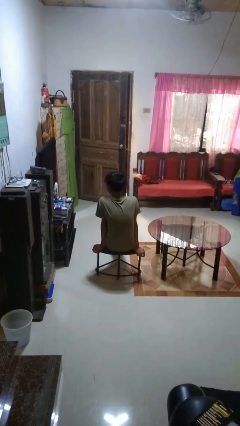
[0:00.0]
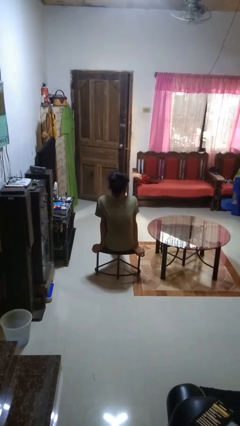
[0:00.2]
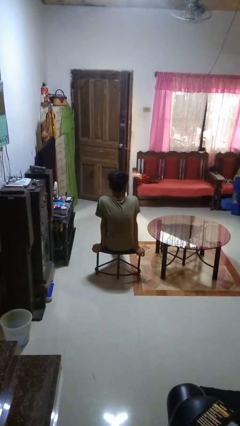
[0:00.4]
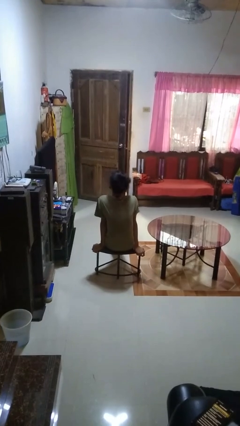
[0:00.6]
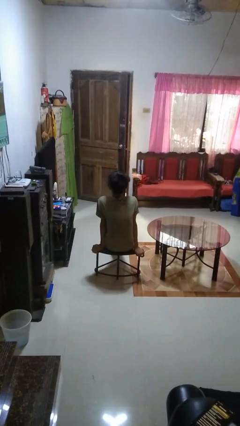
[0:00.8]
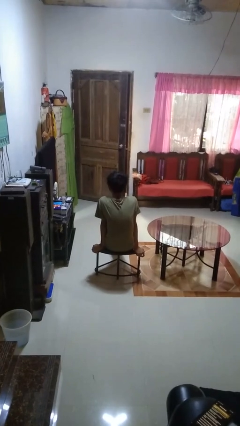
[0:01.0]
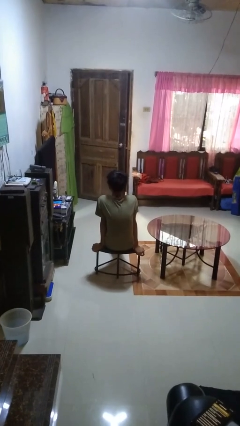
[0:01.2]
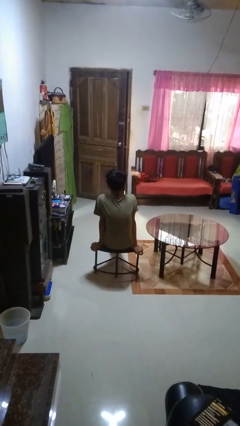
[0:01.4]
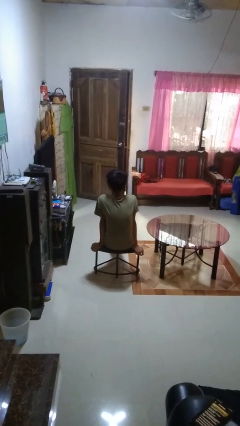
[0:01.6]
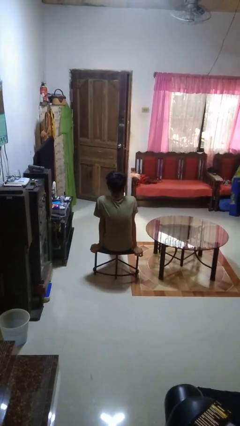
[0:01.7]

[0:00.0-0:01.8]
person nods head

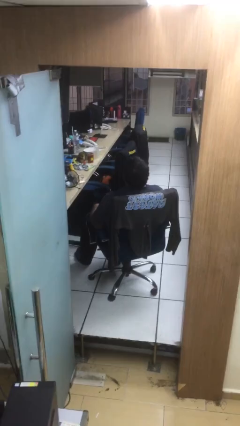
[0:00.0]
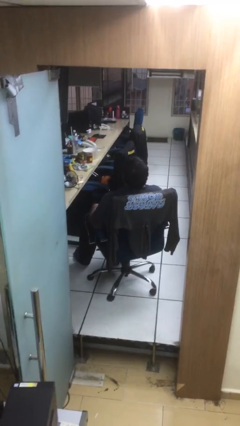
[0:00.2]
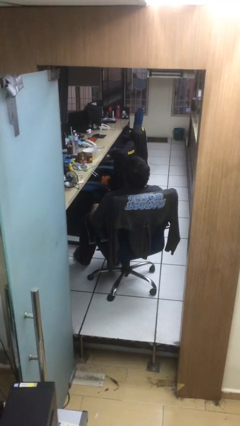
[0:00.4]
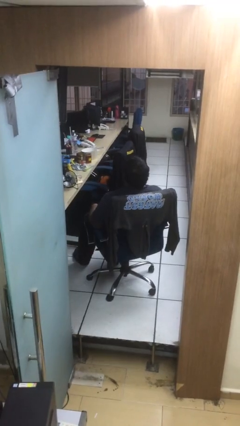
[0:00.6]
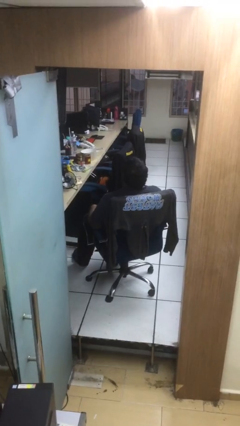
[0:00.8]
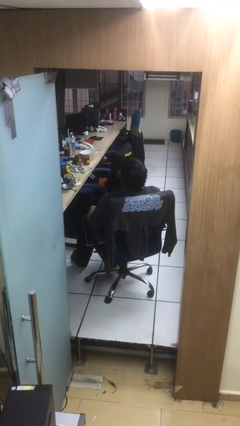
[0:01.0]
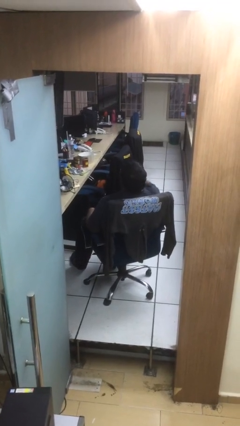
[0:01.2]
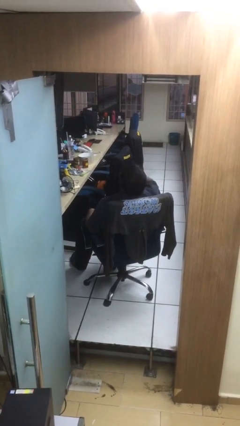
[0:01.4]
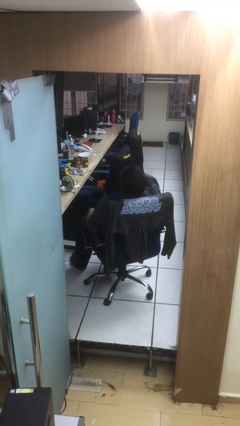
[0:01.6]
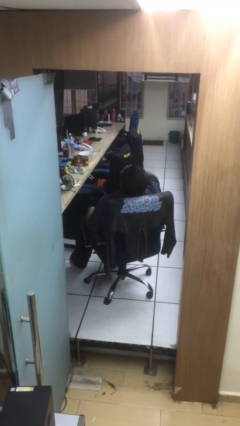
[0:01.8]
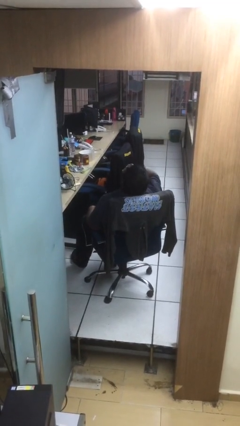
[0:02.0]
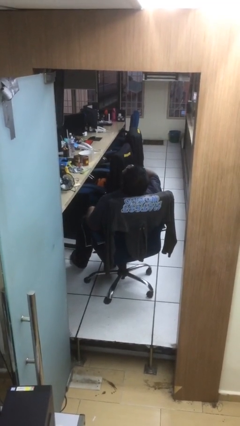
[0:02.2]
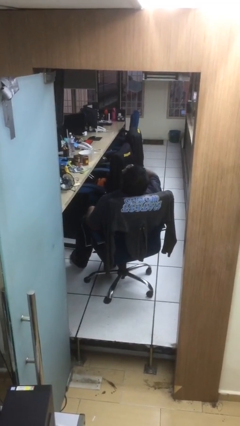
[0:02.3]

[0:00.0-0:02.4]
person yawns

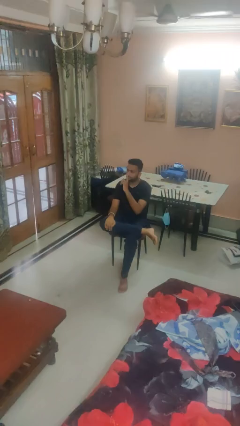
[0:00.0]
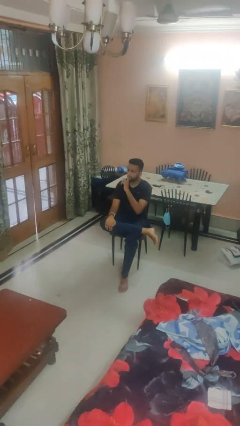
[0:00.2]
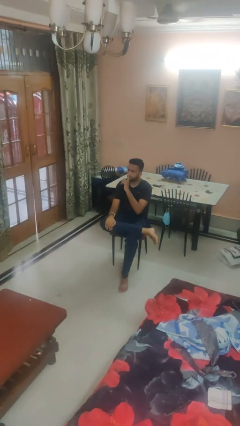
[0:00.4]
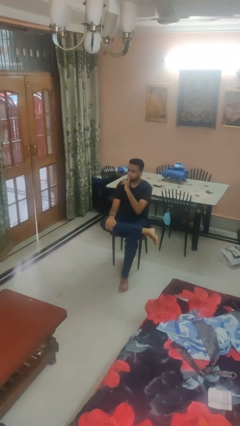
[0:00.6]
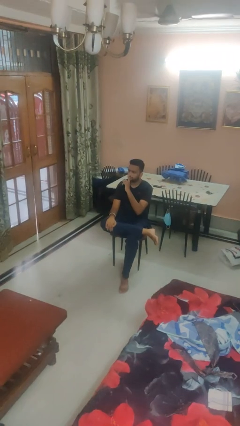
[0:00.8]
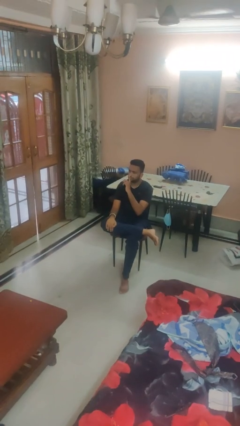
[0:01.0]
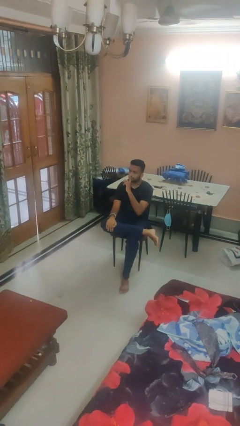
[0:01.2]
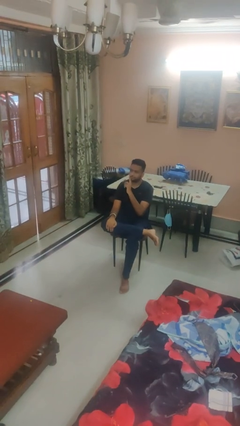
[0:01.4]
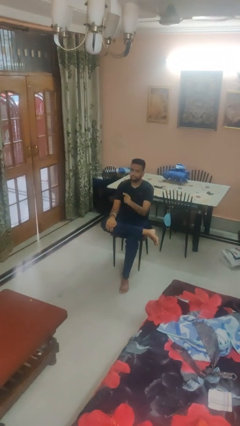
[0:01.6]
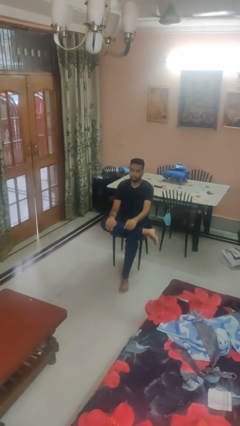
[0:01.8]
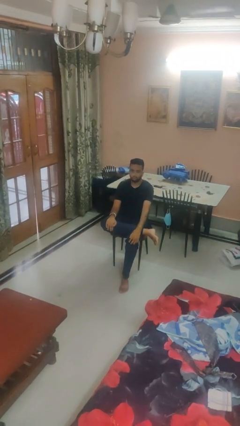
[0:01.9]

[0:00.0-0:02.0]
person gestures be quiet

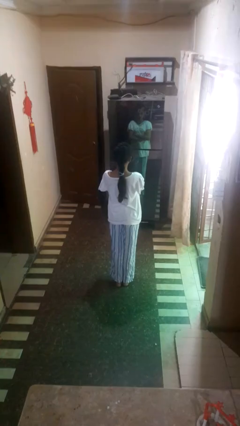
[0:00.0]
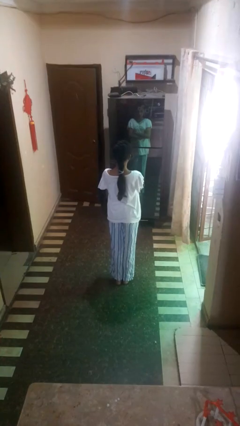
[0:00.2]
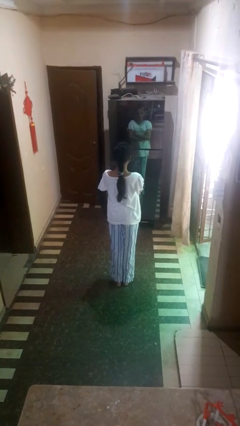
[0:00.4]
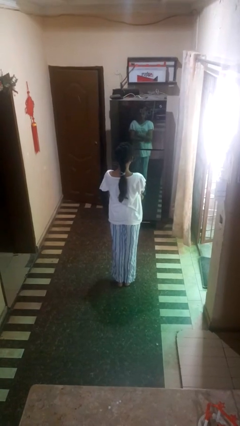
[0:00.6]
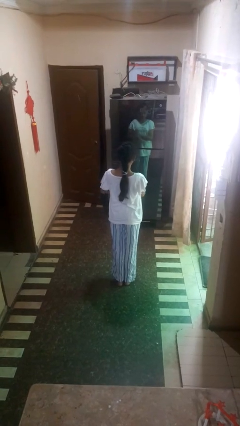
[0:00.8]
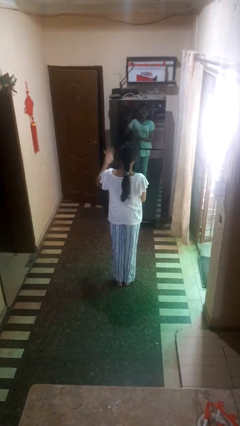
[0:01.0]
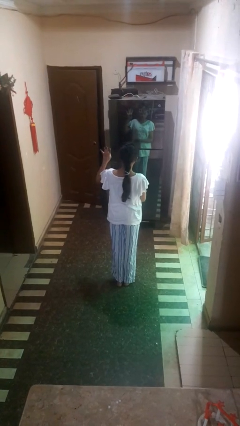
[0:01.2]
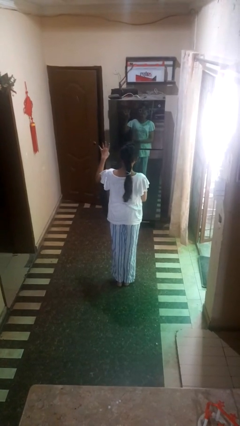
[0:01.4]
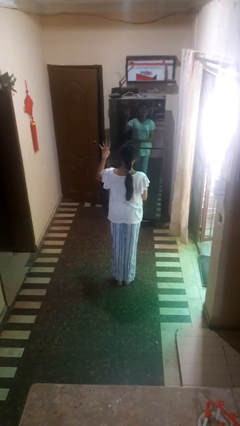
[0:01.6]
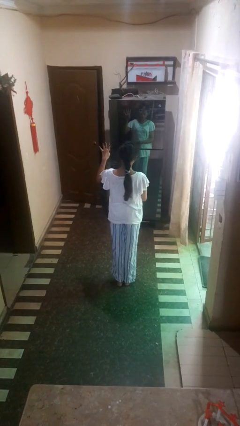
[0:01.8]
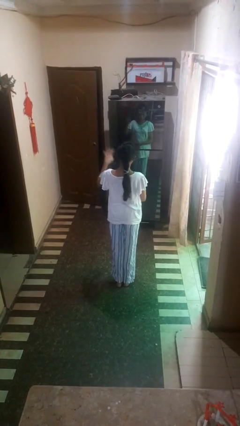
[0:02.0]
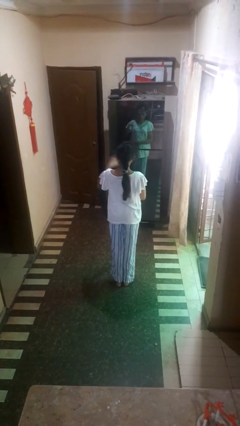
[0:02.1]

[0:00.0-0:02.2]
person gestures number four

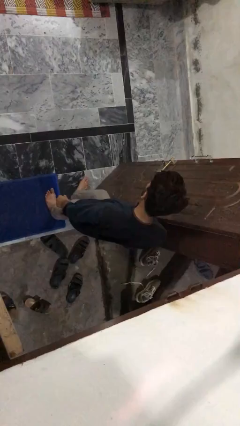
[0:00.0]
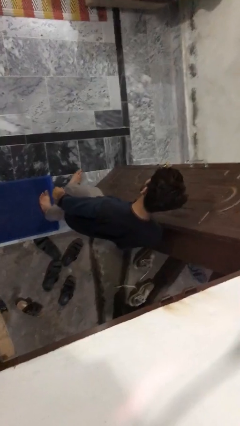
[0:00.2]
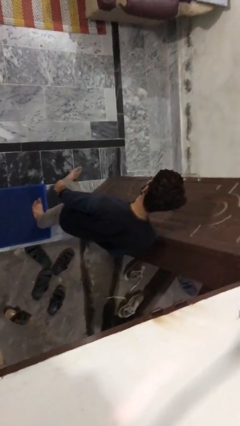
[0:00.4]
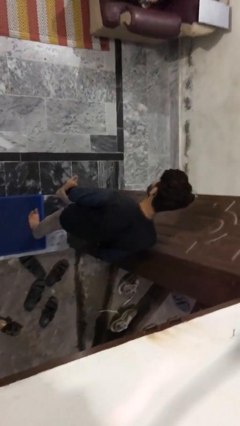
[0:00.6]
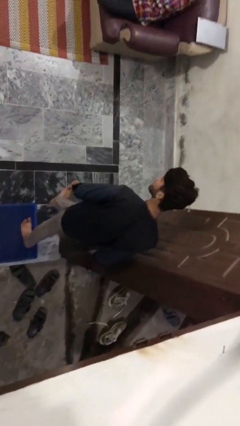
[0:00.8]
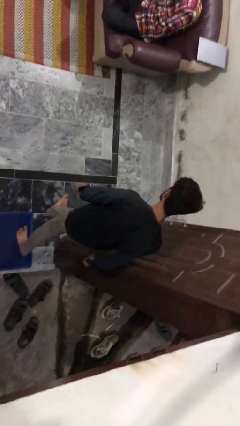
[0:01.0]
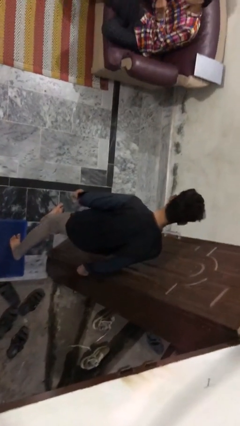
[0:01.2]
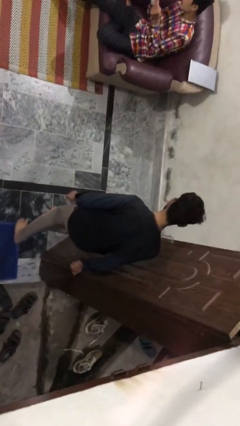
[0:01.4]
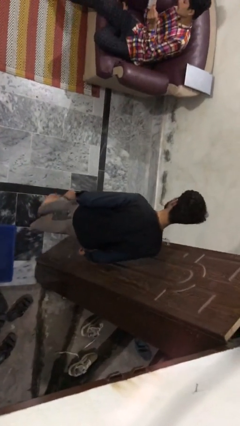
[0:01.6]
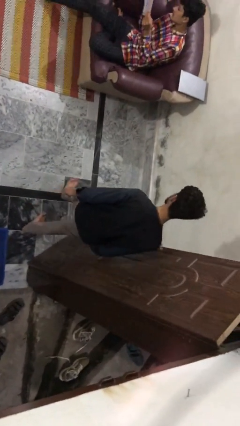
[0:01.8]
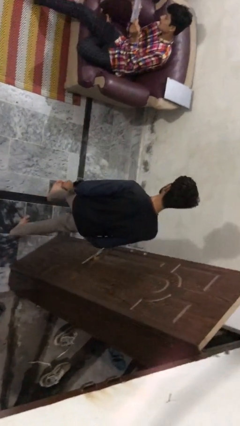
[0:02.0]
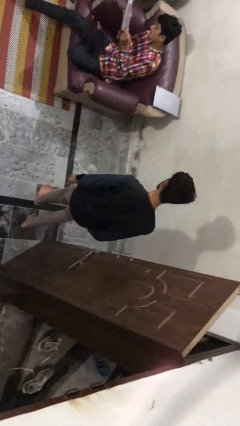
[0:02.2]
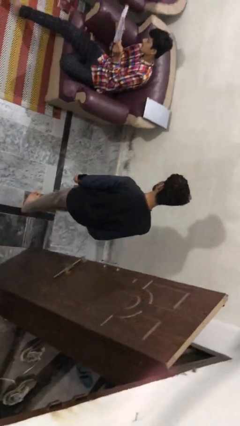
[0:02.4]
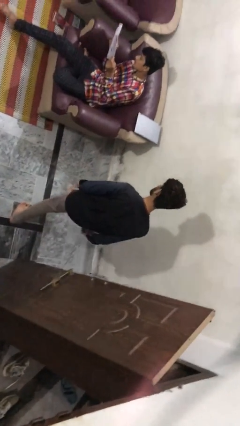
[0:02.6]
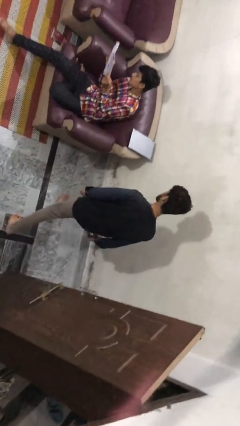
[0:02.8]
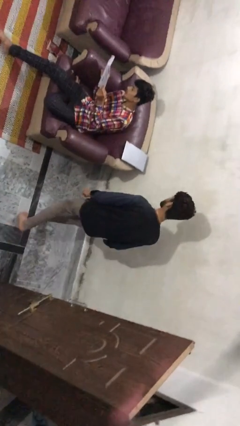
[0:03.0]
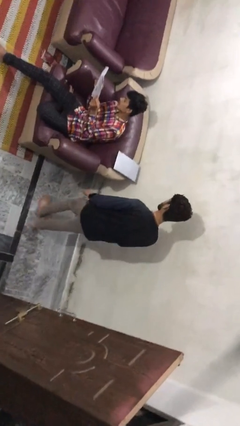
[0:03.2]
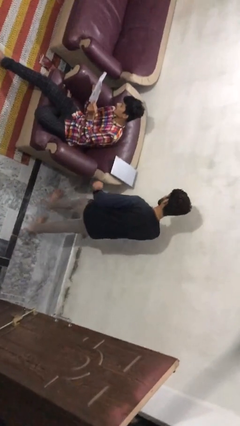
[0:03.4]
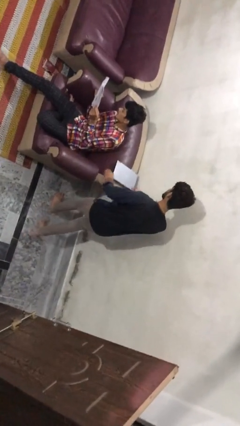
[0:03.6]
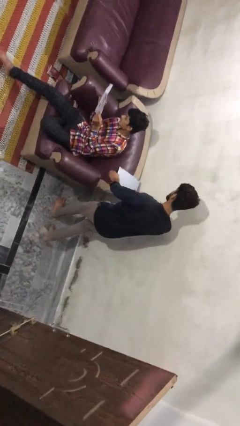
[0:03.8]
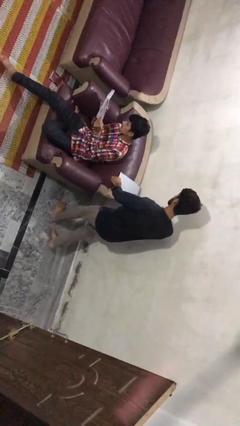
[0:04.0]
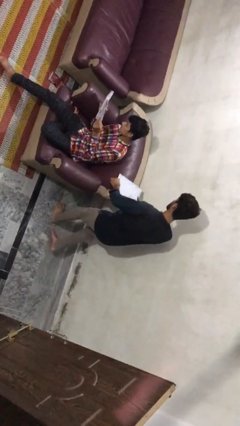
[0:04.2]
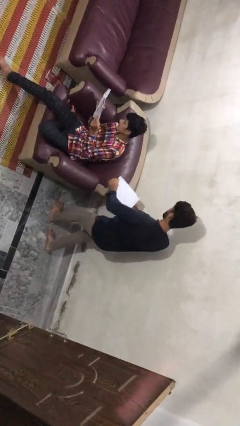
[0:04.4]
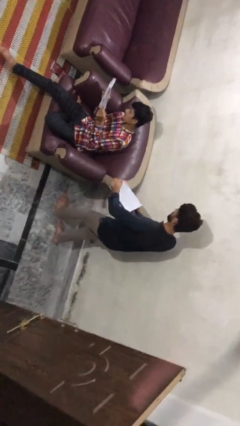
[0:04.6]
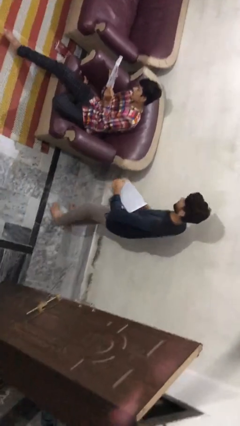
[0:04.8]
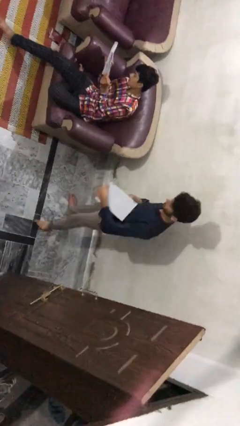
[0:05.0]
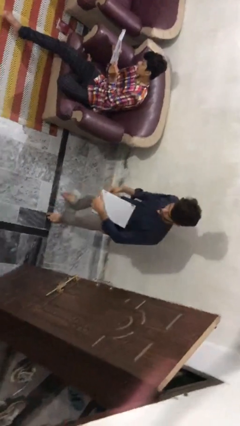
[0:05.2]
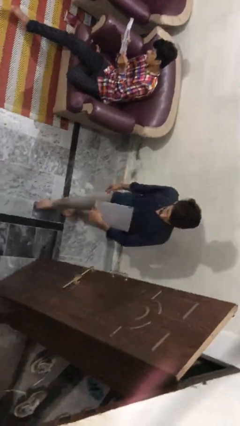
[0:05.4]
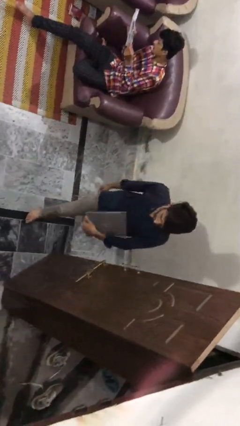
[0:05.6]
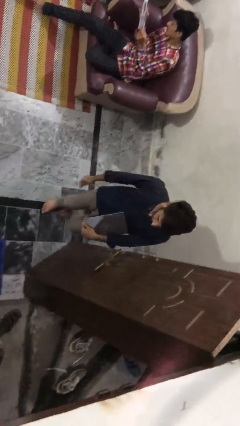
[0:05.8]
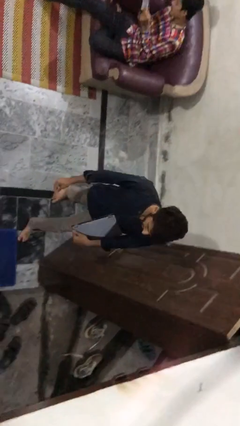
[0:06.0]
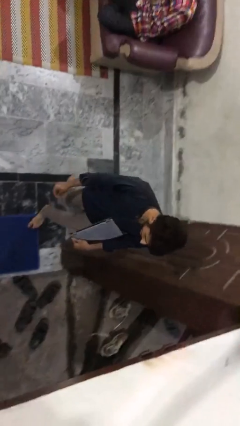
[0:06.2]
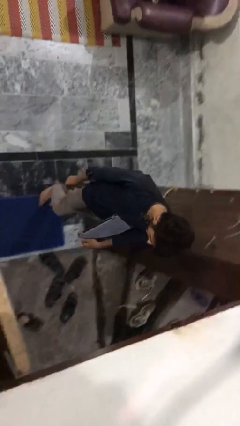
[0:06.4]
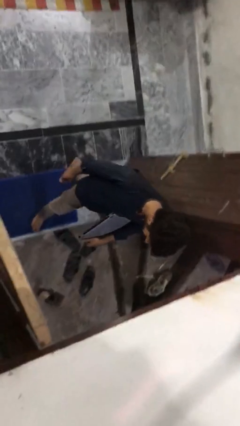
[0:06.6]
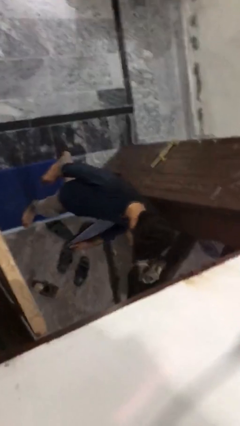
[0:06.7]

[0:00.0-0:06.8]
person steals object from person

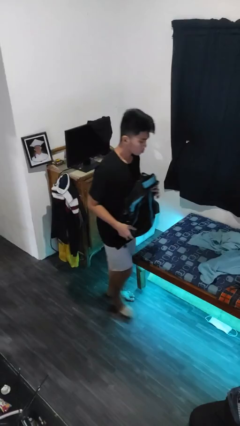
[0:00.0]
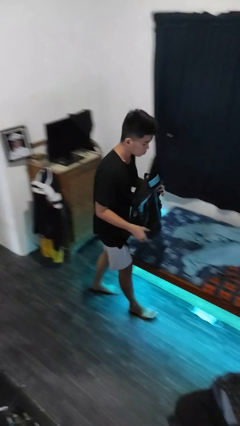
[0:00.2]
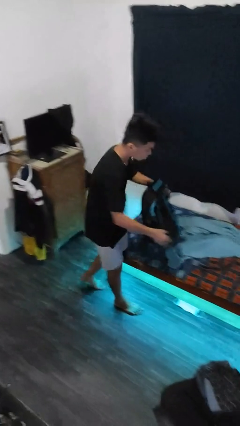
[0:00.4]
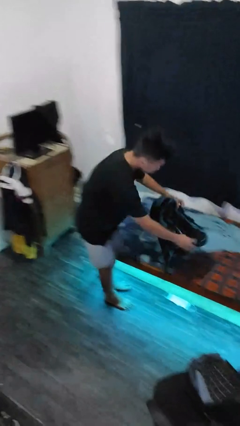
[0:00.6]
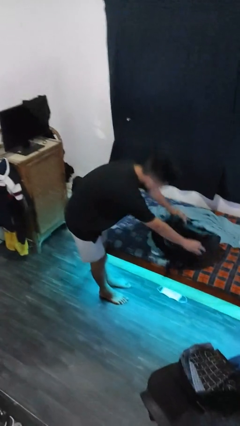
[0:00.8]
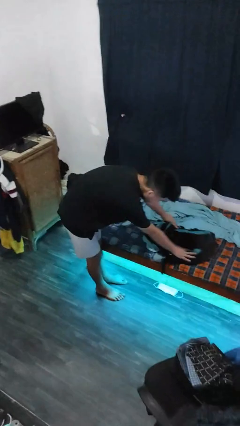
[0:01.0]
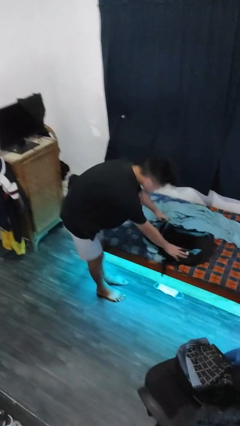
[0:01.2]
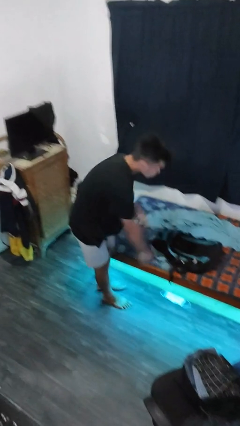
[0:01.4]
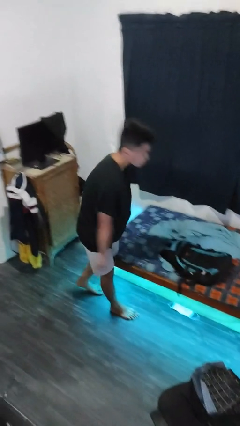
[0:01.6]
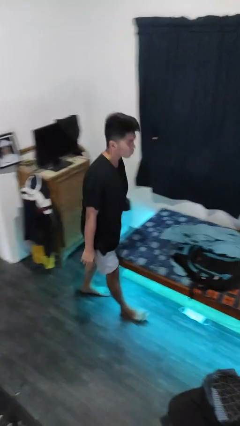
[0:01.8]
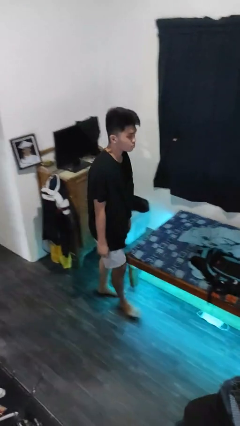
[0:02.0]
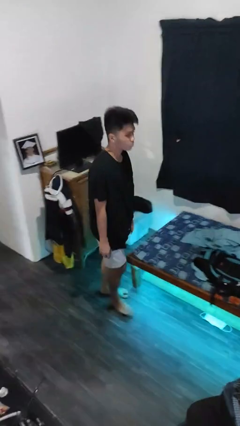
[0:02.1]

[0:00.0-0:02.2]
person puts down object on bed

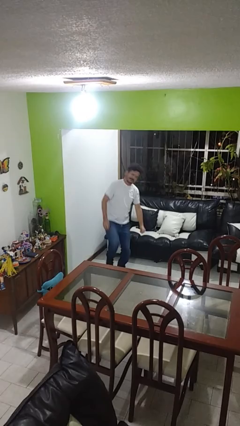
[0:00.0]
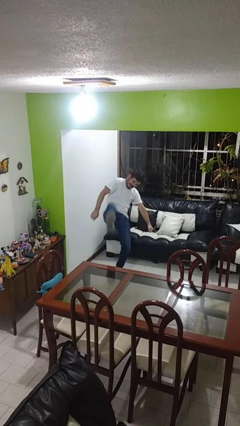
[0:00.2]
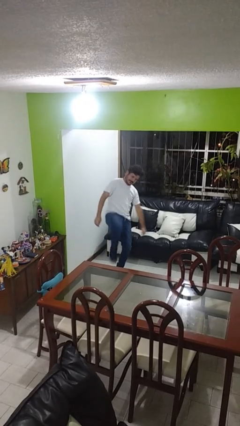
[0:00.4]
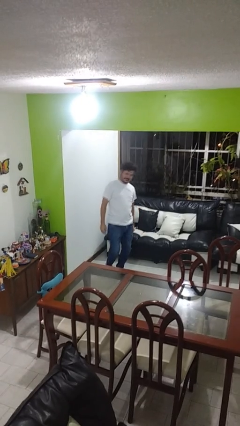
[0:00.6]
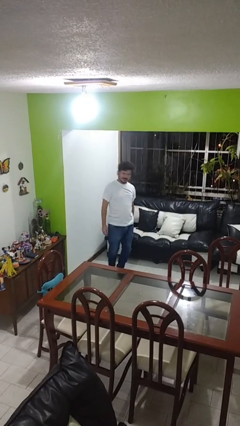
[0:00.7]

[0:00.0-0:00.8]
person karate kicks
